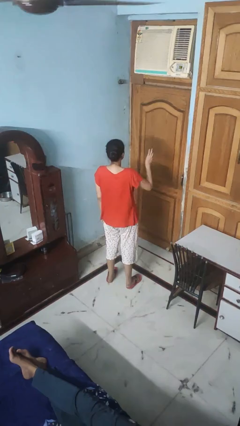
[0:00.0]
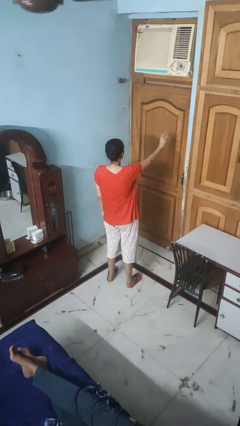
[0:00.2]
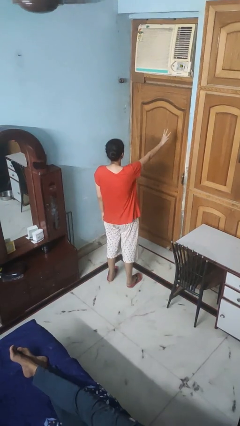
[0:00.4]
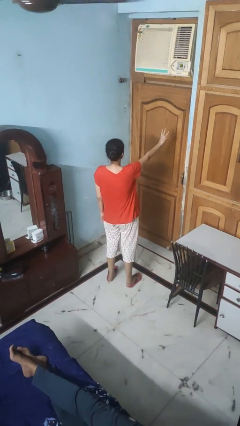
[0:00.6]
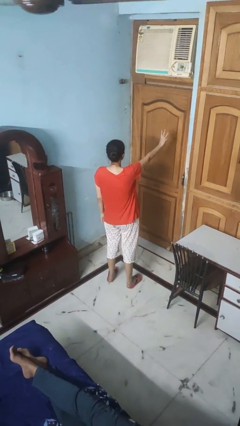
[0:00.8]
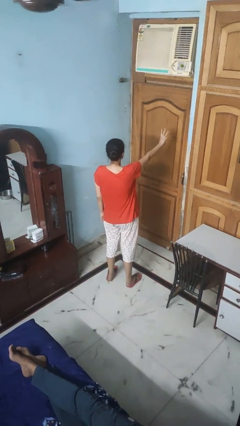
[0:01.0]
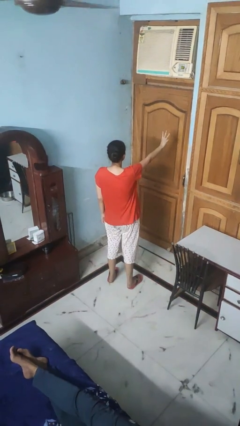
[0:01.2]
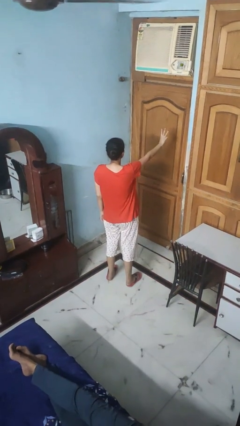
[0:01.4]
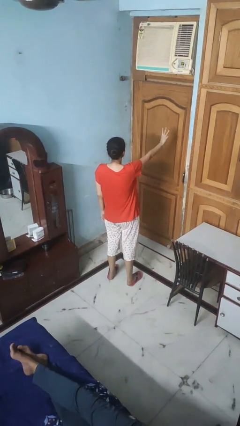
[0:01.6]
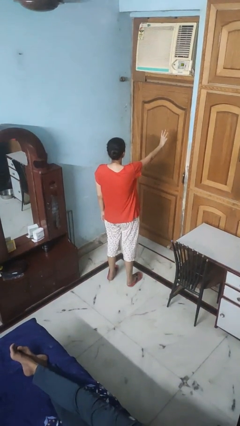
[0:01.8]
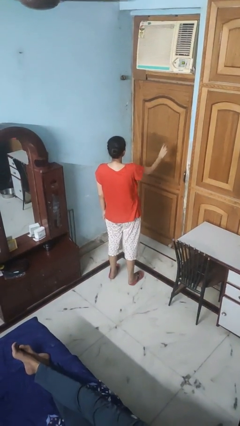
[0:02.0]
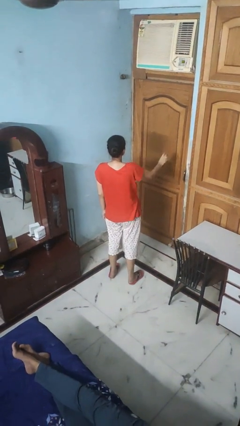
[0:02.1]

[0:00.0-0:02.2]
person gestures number three

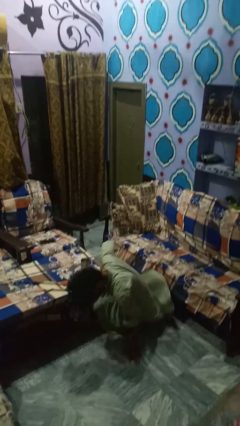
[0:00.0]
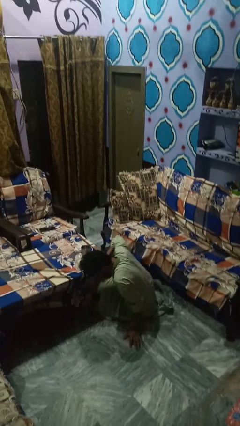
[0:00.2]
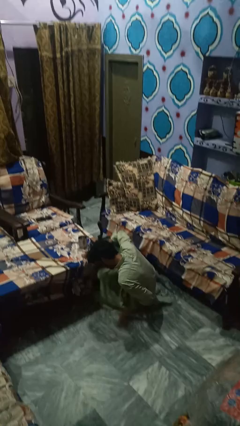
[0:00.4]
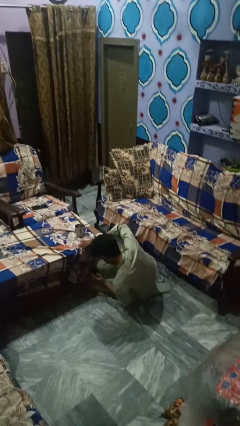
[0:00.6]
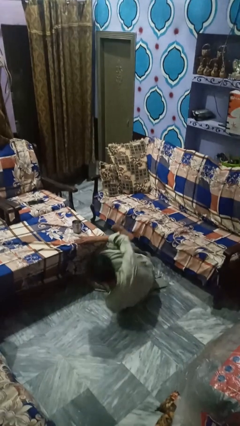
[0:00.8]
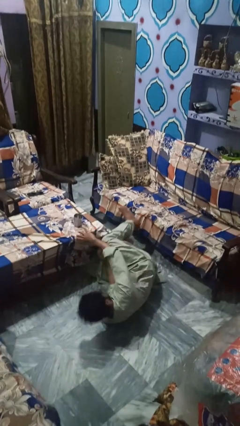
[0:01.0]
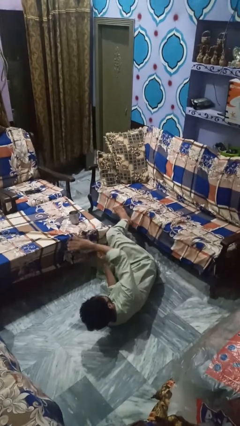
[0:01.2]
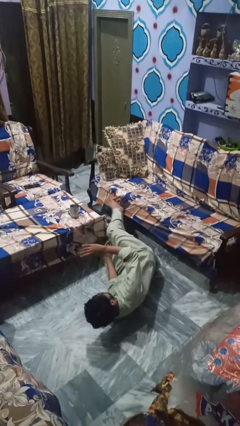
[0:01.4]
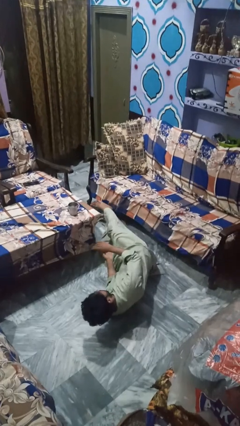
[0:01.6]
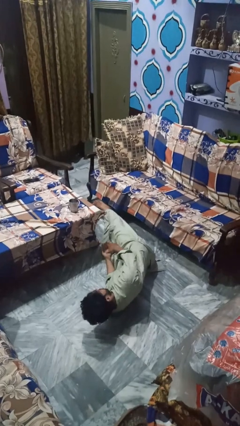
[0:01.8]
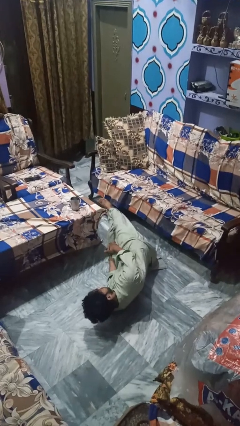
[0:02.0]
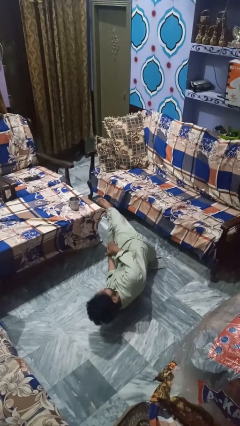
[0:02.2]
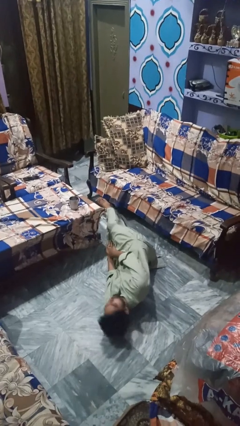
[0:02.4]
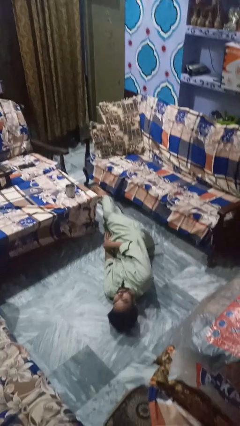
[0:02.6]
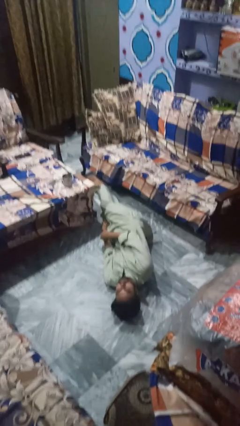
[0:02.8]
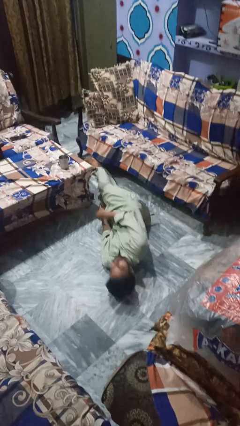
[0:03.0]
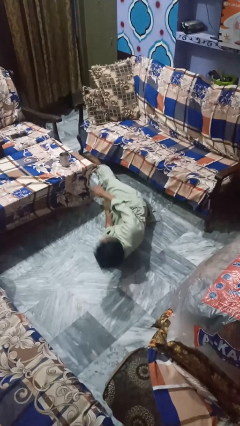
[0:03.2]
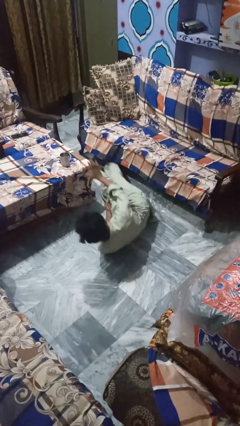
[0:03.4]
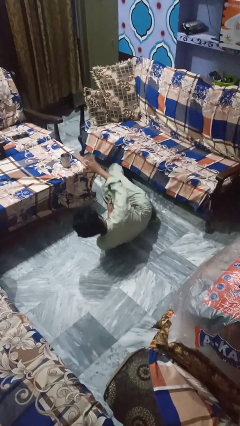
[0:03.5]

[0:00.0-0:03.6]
person lies down on floor

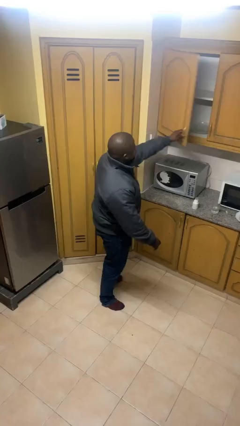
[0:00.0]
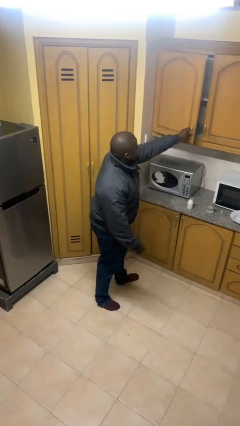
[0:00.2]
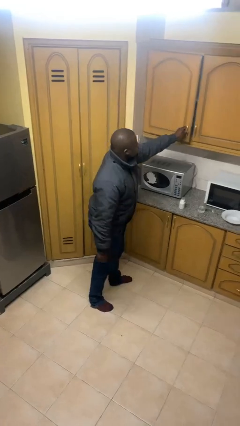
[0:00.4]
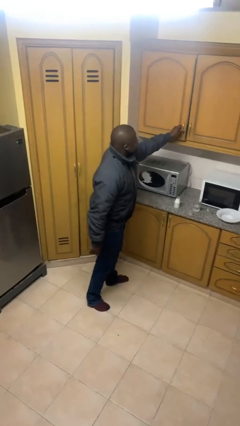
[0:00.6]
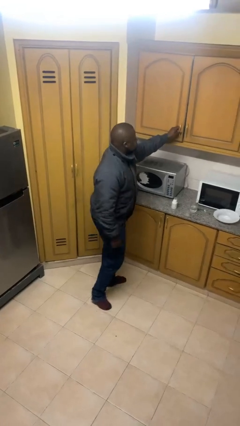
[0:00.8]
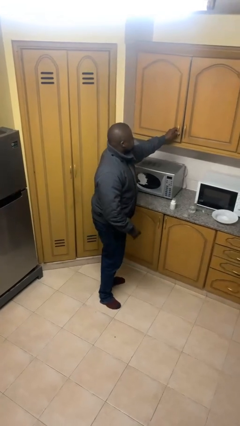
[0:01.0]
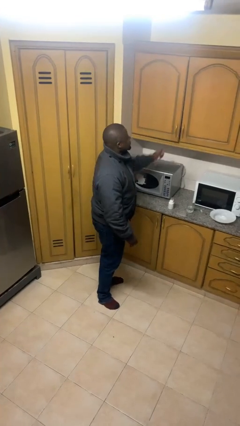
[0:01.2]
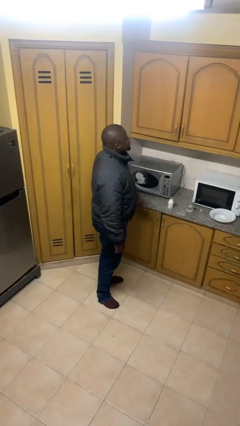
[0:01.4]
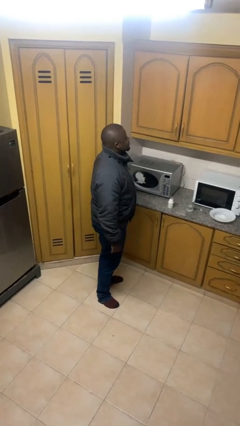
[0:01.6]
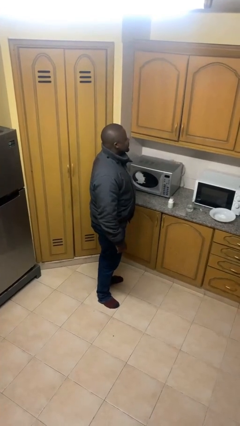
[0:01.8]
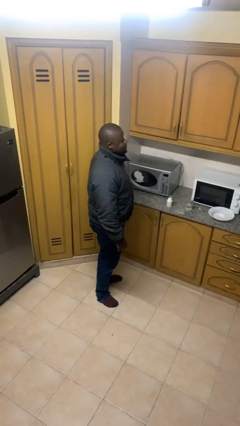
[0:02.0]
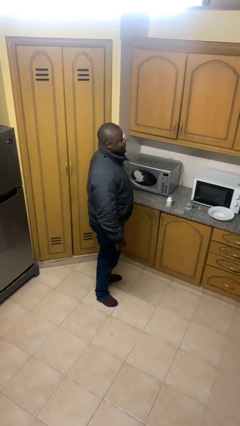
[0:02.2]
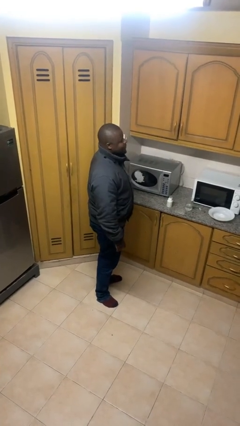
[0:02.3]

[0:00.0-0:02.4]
person closes cabinet

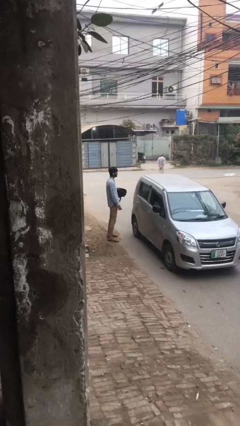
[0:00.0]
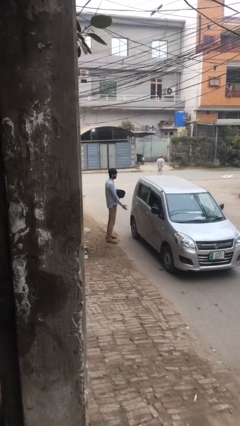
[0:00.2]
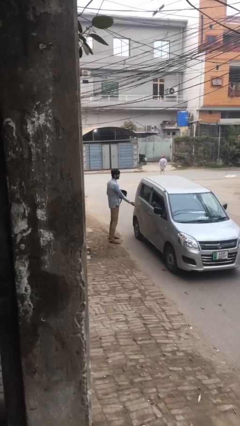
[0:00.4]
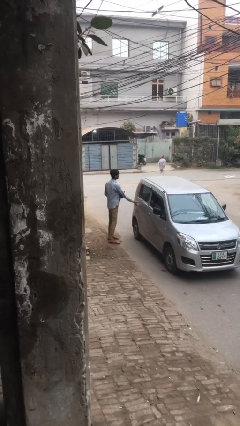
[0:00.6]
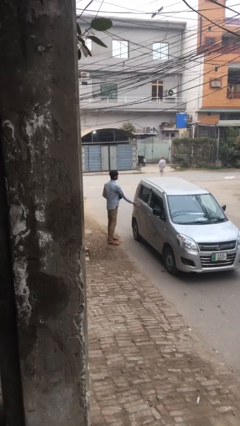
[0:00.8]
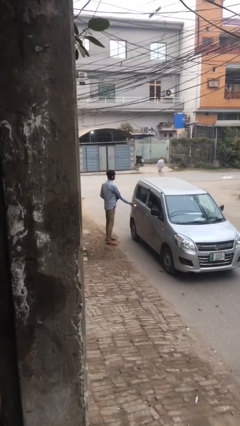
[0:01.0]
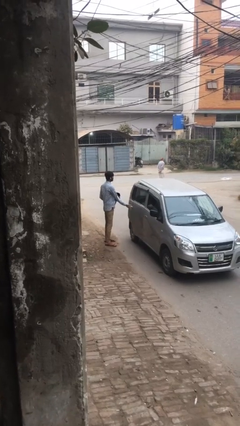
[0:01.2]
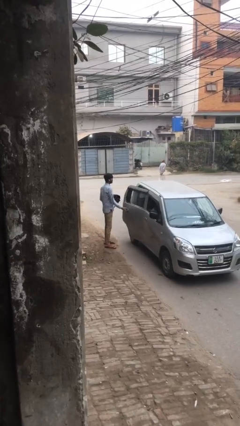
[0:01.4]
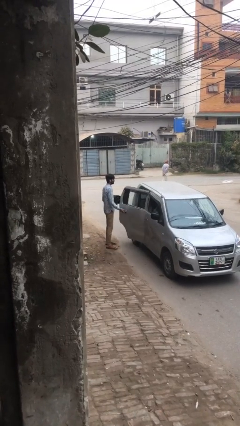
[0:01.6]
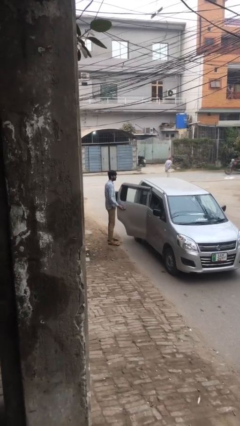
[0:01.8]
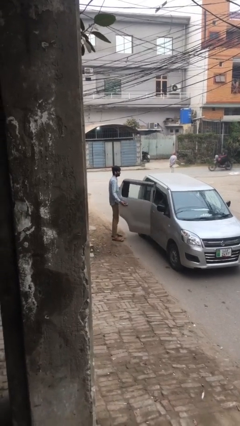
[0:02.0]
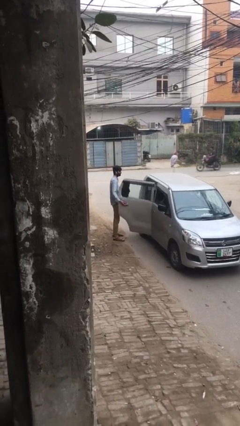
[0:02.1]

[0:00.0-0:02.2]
person opens car door

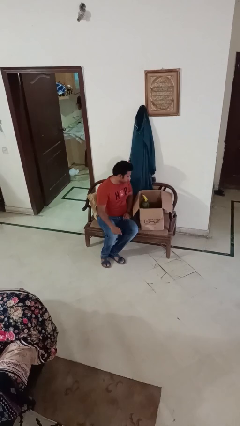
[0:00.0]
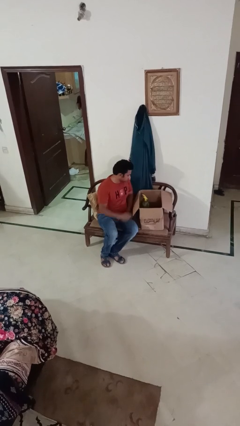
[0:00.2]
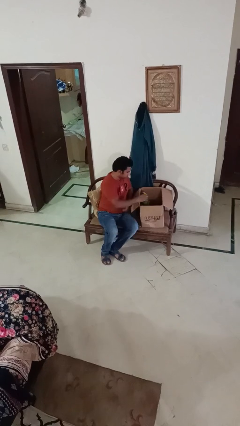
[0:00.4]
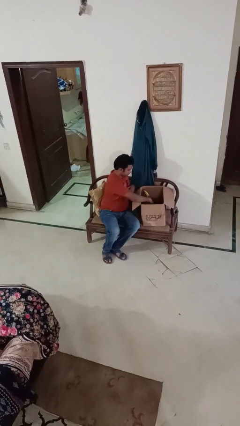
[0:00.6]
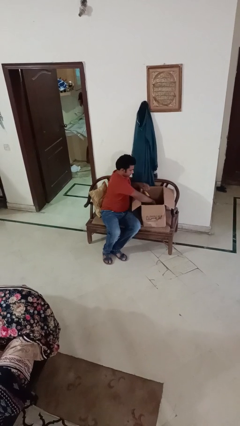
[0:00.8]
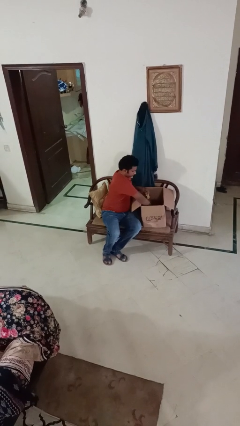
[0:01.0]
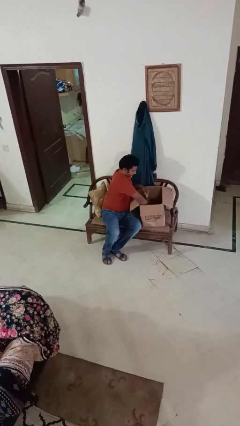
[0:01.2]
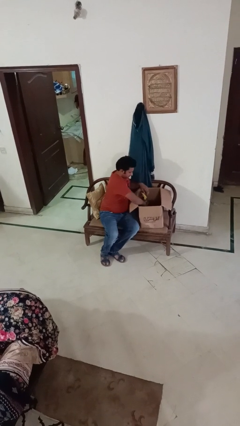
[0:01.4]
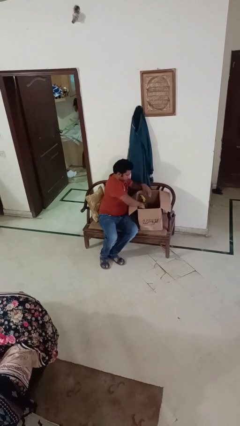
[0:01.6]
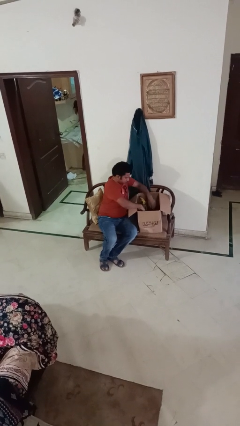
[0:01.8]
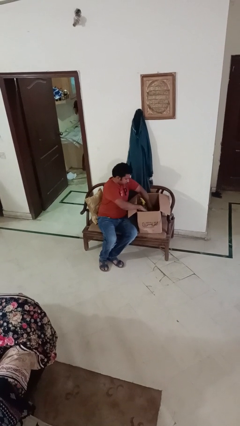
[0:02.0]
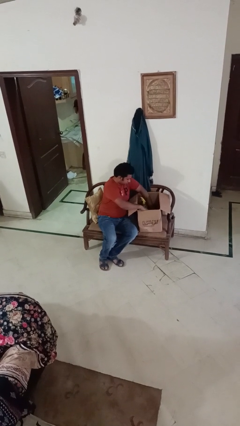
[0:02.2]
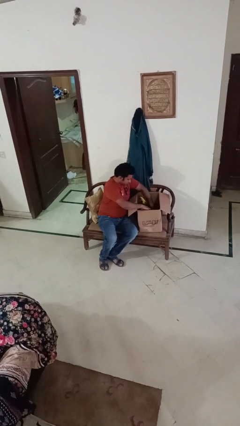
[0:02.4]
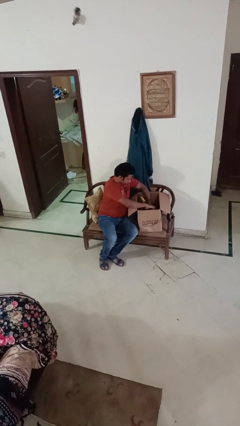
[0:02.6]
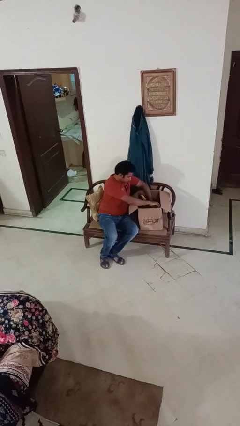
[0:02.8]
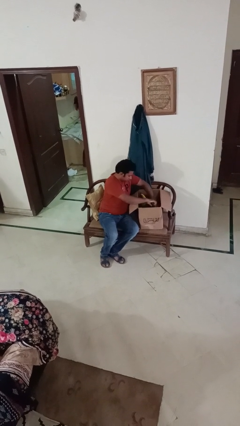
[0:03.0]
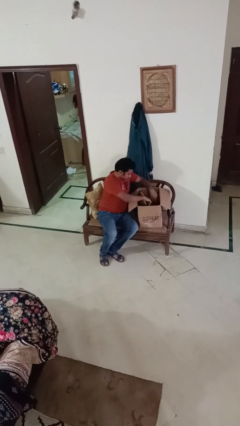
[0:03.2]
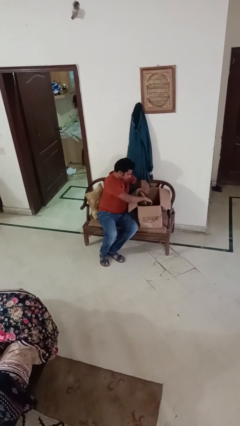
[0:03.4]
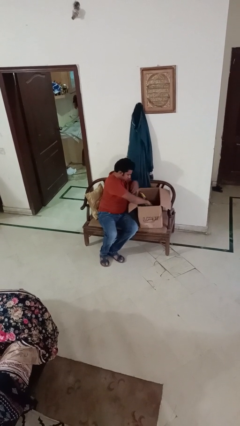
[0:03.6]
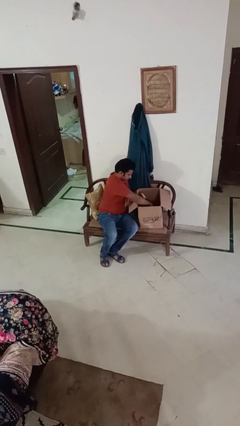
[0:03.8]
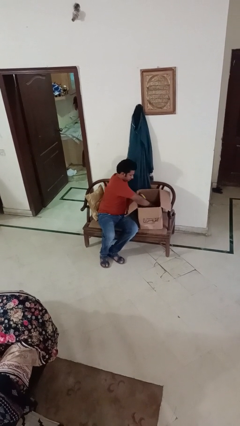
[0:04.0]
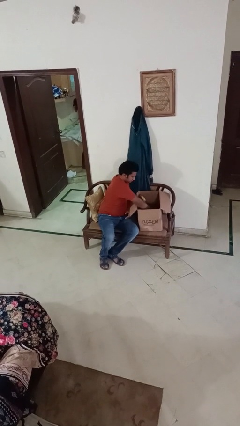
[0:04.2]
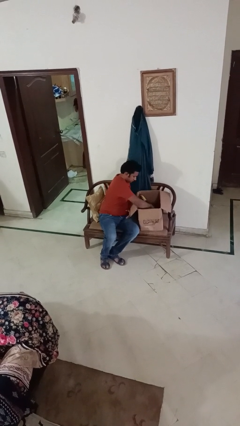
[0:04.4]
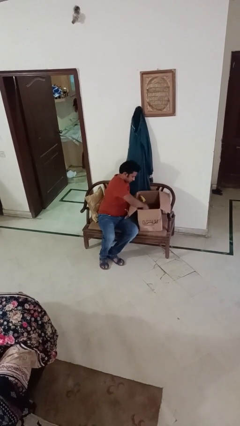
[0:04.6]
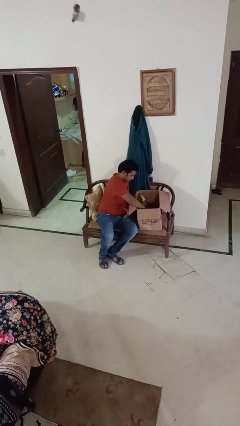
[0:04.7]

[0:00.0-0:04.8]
person searches in box

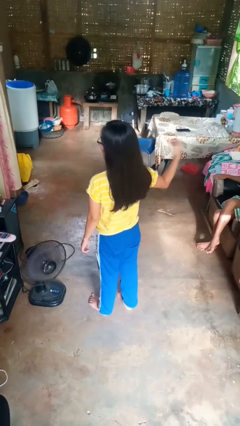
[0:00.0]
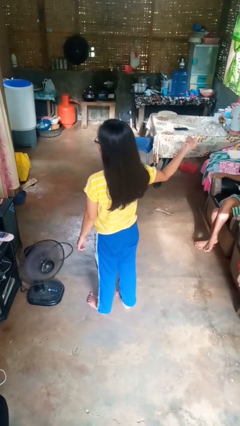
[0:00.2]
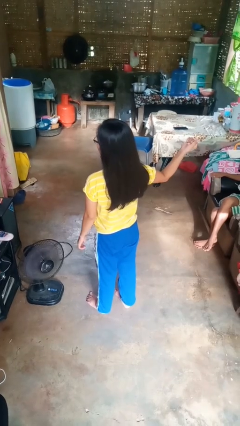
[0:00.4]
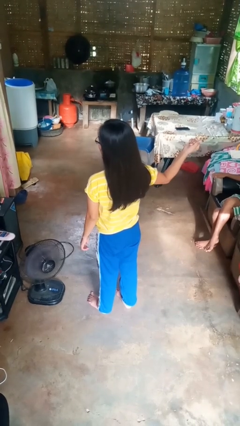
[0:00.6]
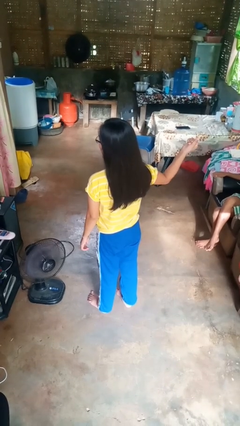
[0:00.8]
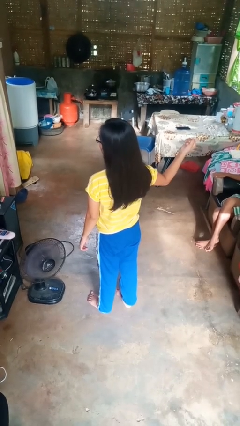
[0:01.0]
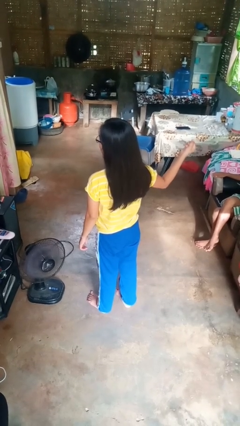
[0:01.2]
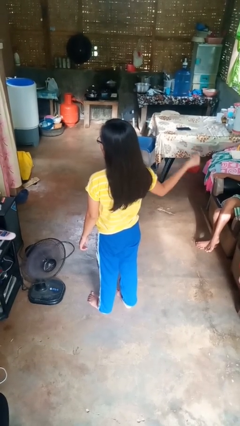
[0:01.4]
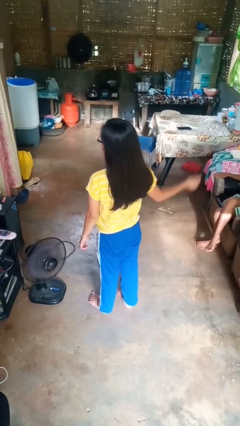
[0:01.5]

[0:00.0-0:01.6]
person snaps fingers

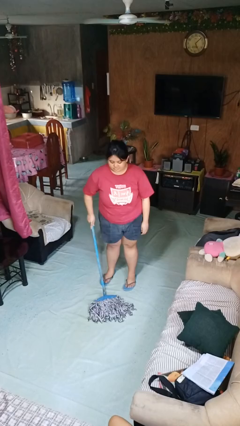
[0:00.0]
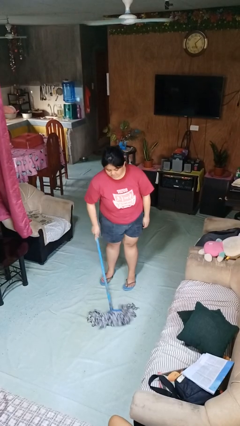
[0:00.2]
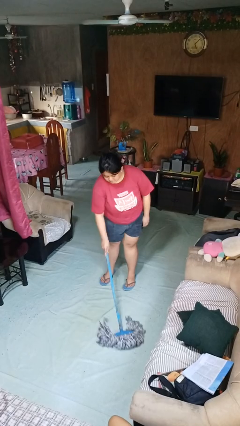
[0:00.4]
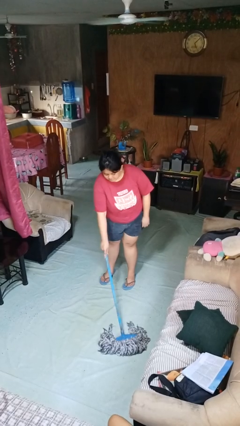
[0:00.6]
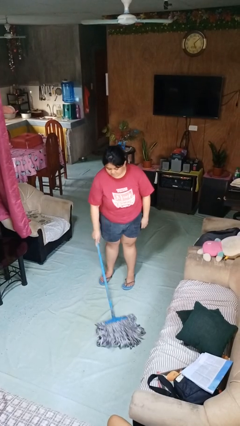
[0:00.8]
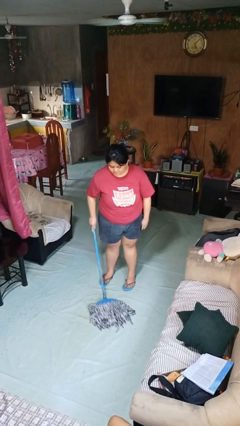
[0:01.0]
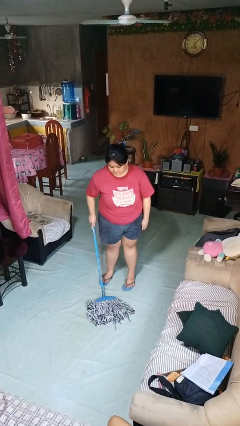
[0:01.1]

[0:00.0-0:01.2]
person mops
